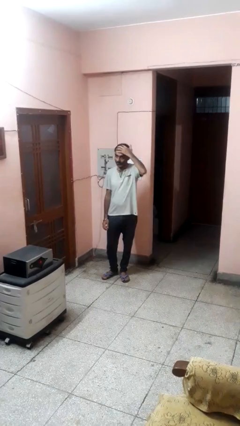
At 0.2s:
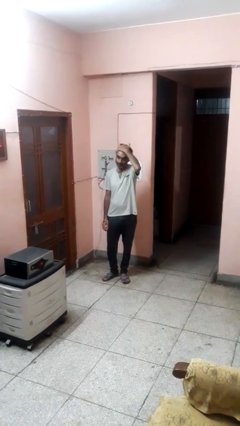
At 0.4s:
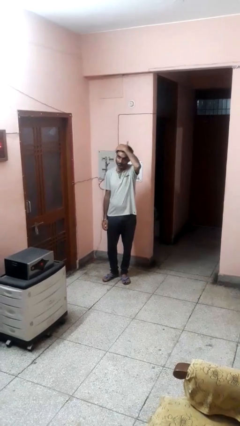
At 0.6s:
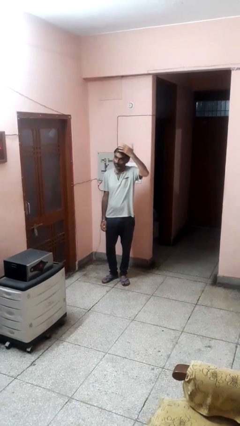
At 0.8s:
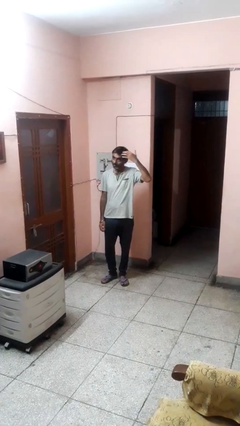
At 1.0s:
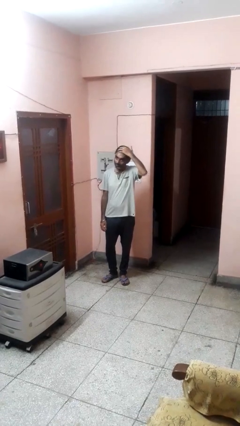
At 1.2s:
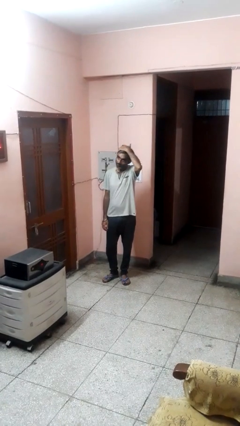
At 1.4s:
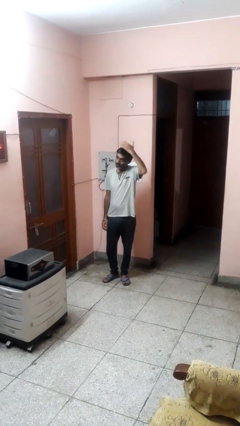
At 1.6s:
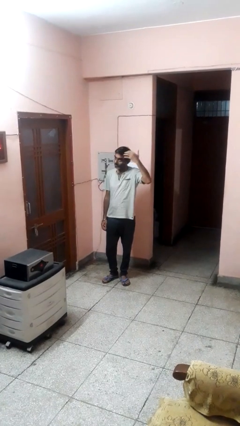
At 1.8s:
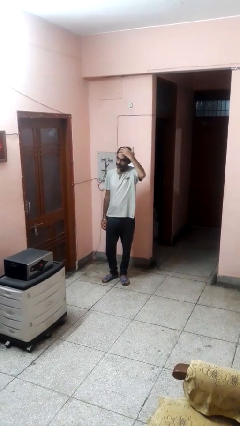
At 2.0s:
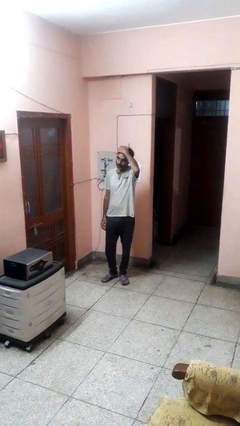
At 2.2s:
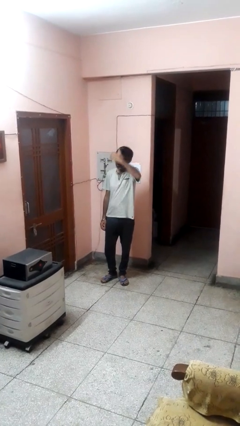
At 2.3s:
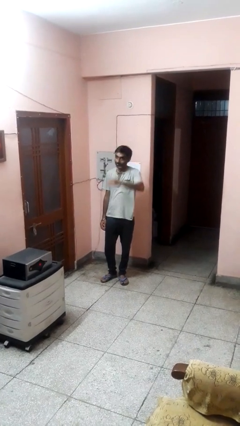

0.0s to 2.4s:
person strokes hair

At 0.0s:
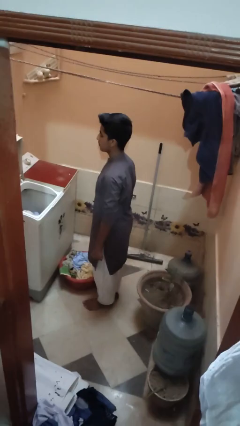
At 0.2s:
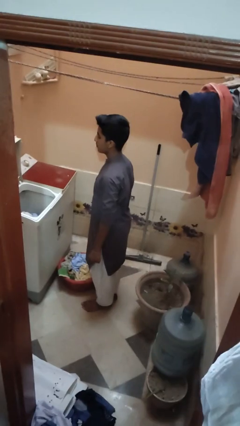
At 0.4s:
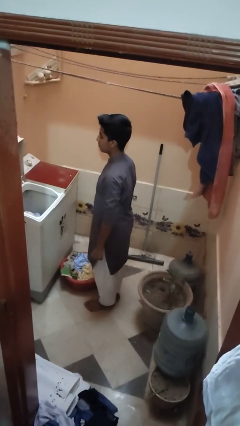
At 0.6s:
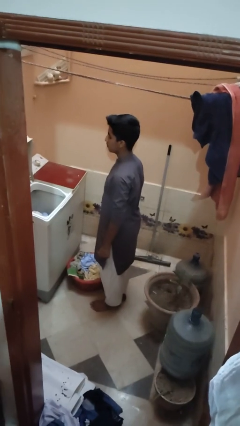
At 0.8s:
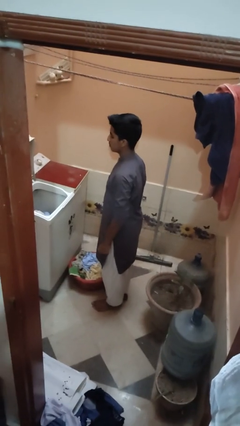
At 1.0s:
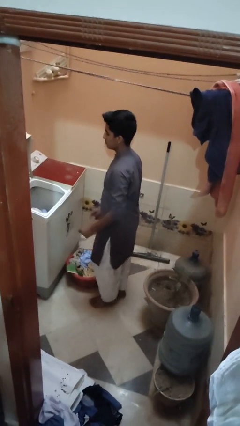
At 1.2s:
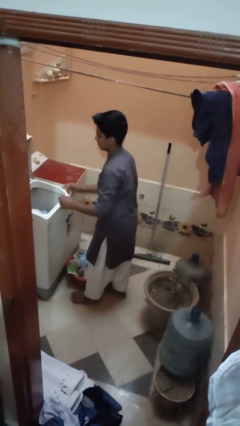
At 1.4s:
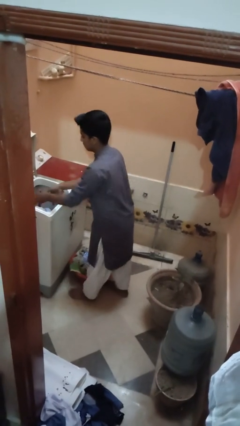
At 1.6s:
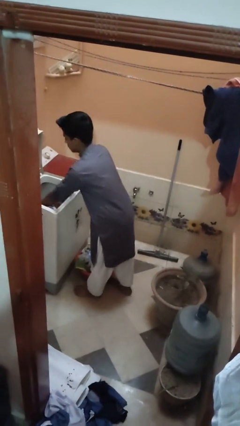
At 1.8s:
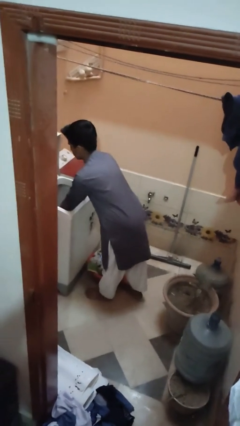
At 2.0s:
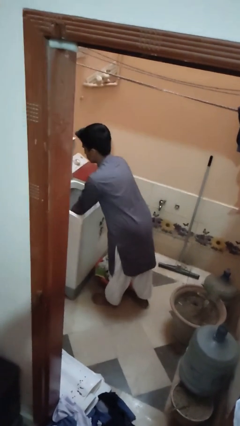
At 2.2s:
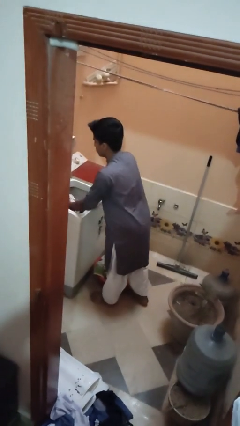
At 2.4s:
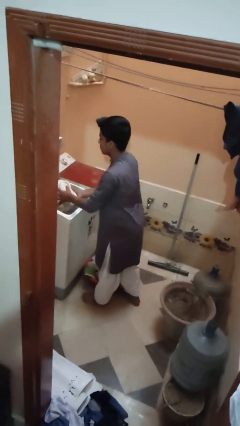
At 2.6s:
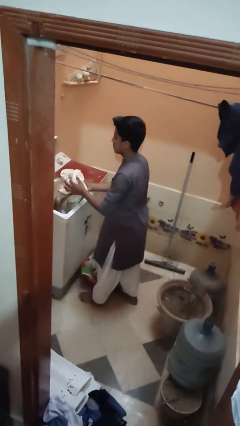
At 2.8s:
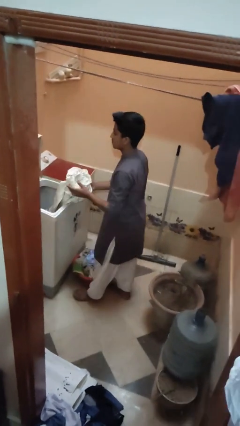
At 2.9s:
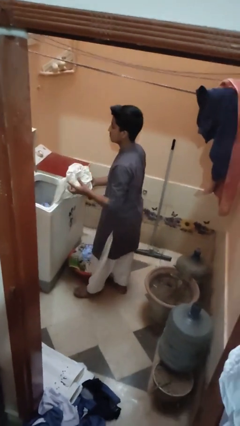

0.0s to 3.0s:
person unloads clotheswasher

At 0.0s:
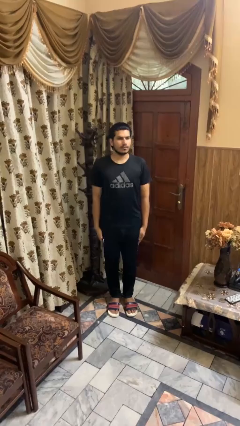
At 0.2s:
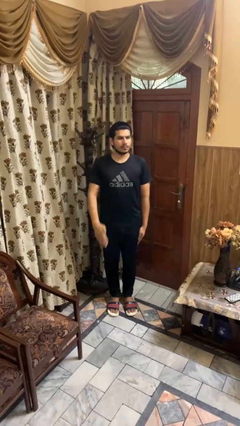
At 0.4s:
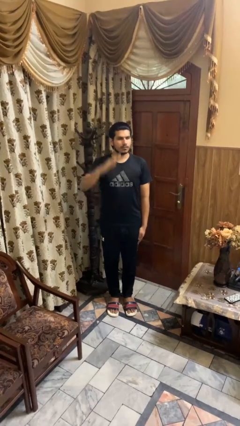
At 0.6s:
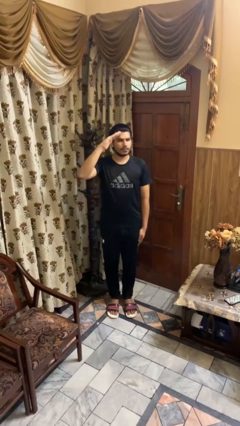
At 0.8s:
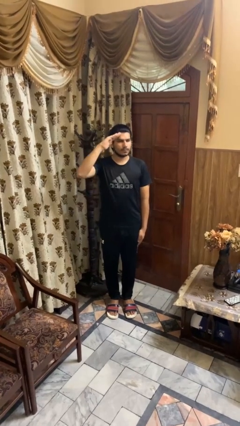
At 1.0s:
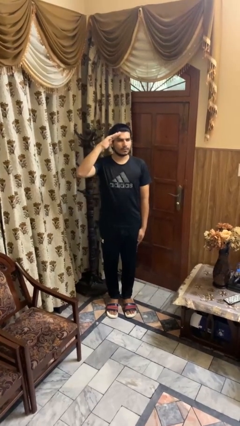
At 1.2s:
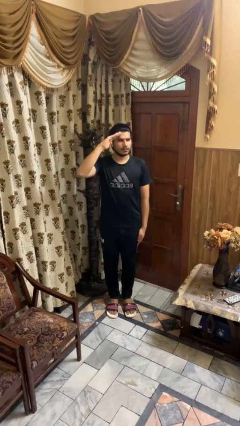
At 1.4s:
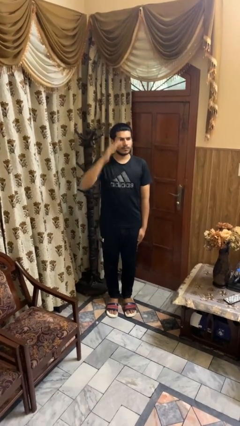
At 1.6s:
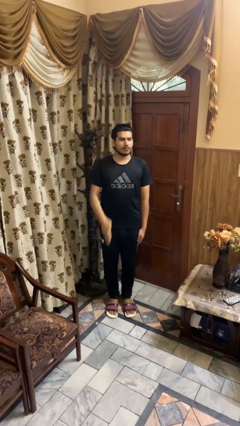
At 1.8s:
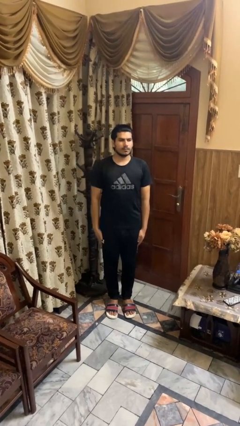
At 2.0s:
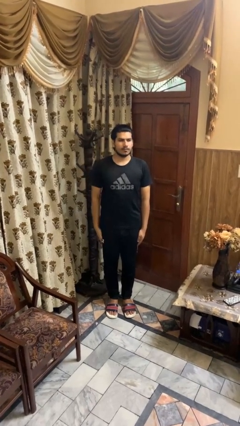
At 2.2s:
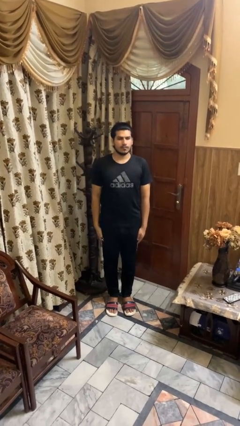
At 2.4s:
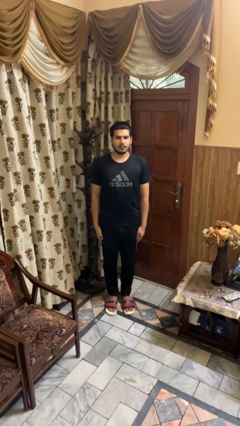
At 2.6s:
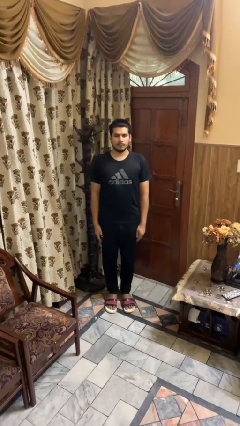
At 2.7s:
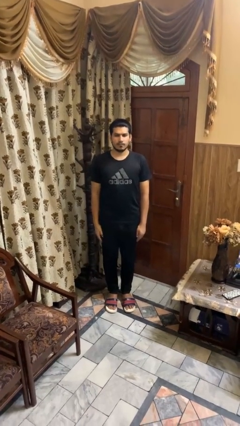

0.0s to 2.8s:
person salutes

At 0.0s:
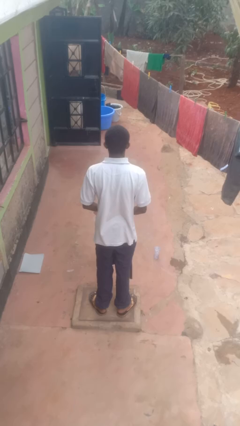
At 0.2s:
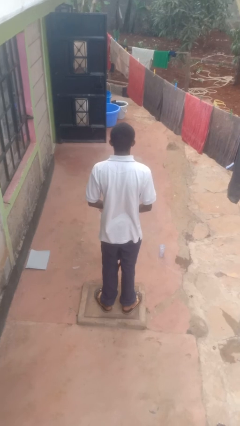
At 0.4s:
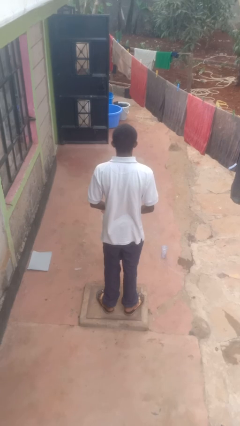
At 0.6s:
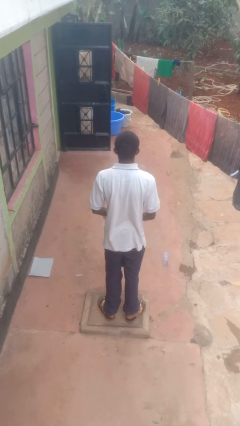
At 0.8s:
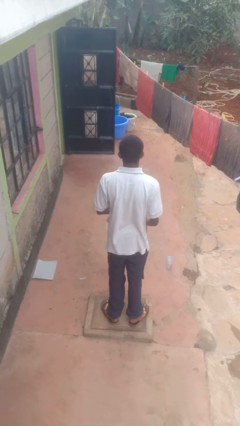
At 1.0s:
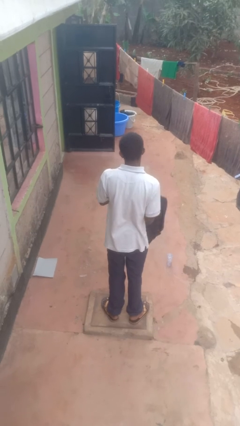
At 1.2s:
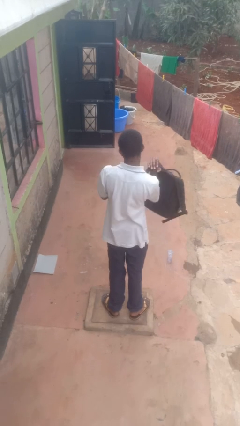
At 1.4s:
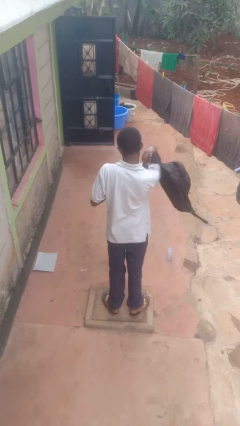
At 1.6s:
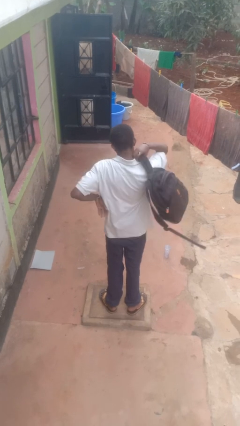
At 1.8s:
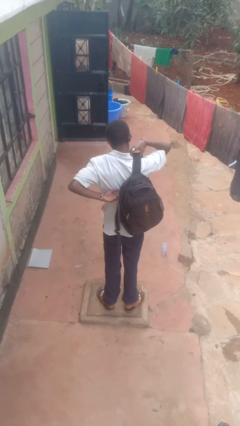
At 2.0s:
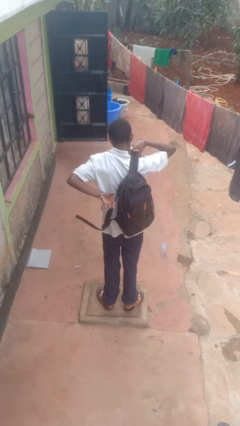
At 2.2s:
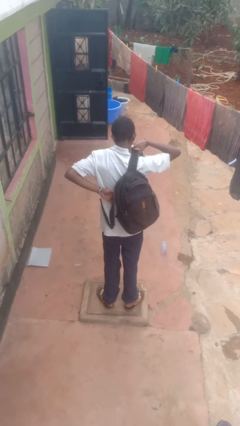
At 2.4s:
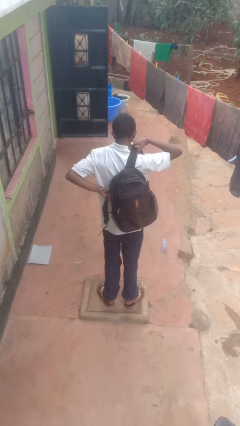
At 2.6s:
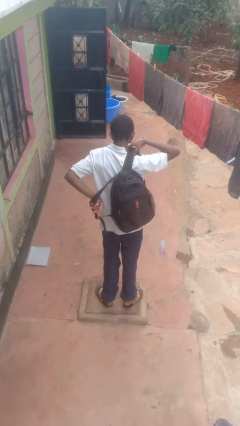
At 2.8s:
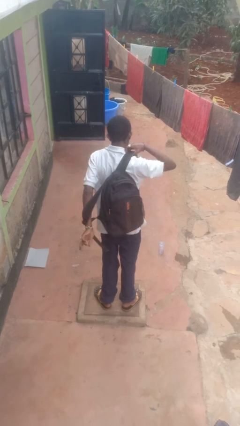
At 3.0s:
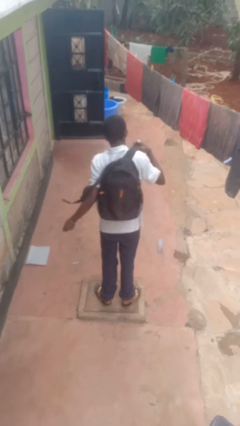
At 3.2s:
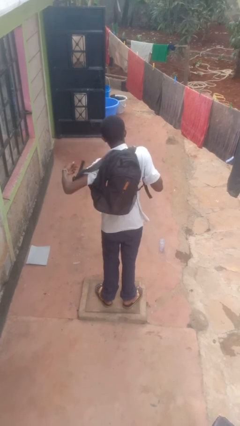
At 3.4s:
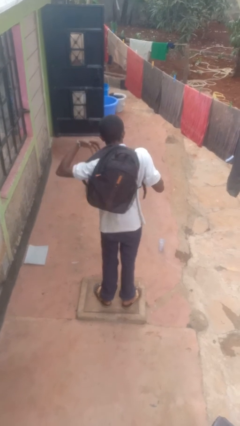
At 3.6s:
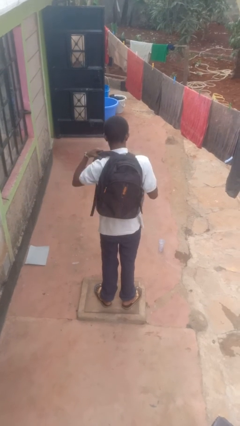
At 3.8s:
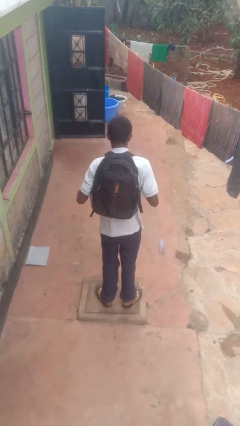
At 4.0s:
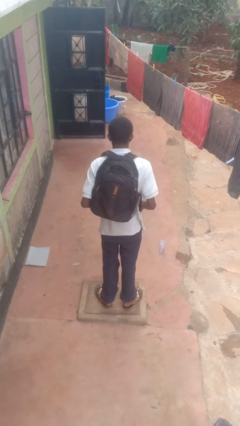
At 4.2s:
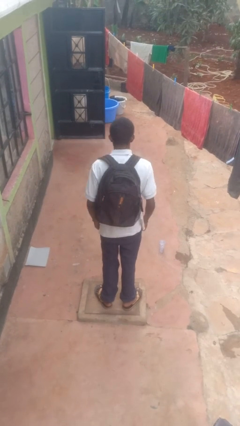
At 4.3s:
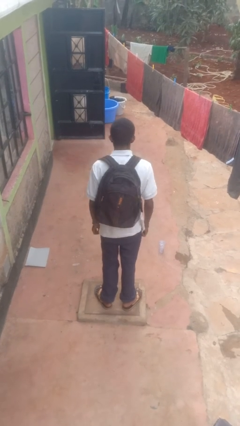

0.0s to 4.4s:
person puts on backpack

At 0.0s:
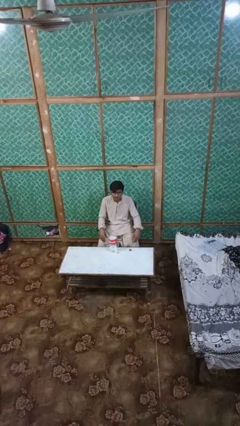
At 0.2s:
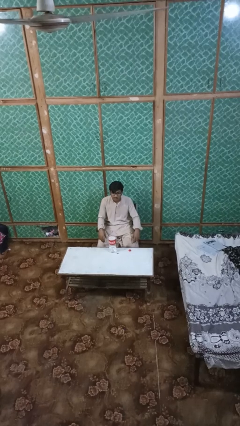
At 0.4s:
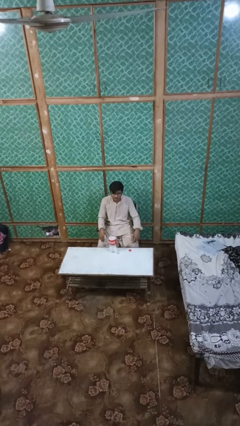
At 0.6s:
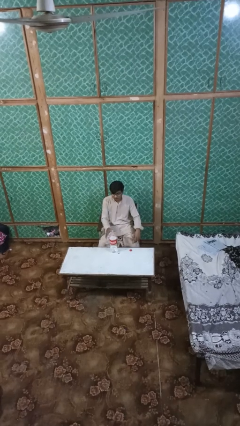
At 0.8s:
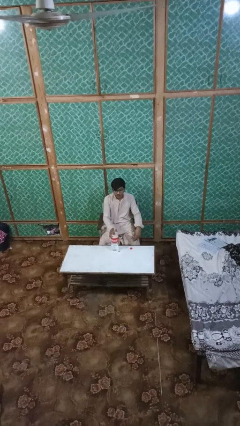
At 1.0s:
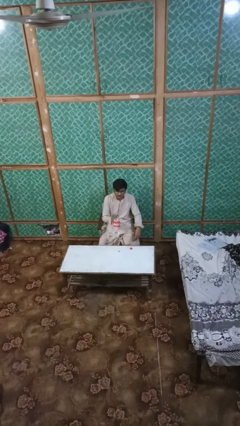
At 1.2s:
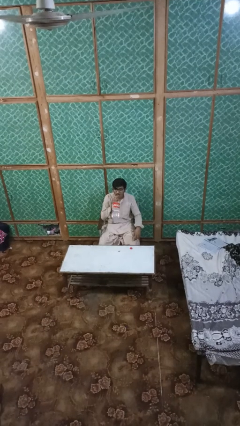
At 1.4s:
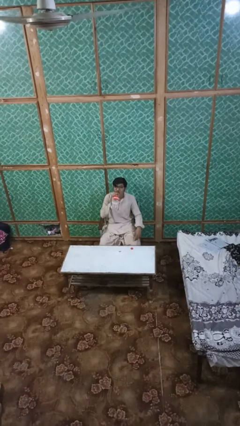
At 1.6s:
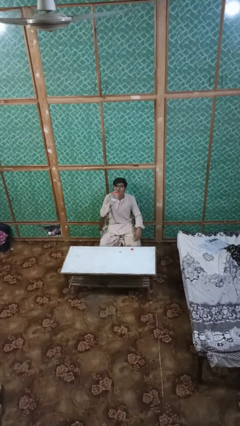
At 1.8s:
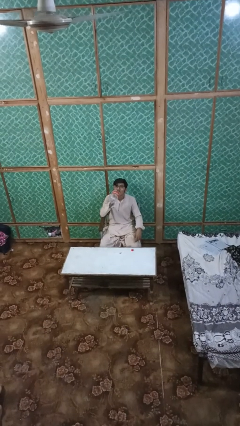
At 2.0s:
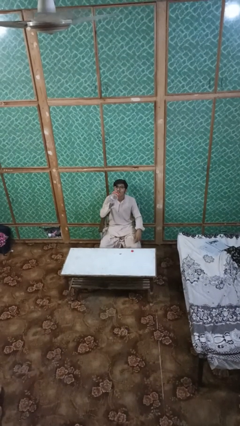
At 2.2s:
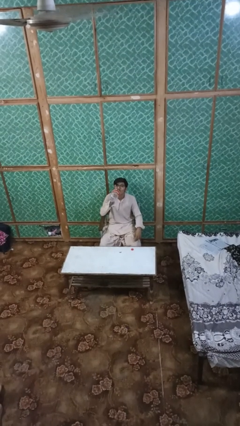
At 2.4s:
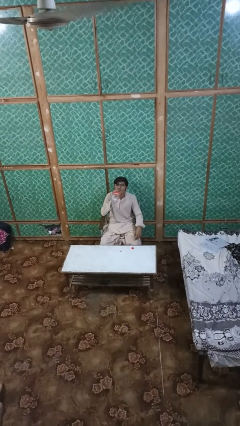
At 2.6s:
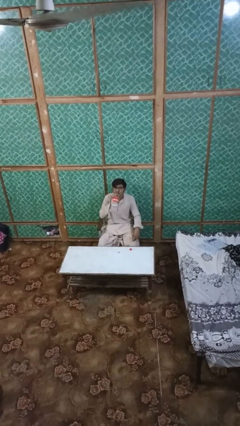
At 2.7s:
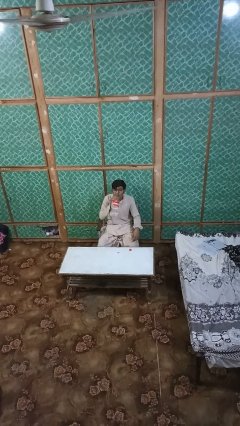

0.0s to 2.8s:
person drinks from bottle

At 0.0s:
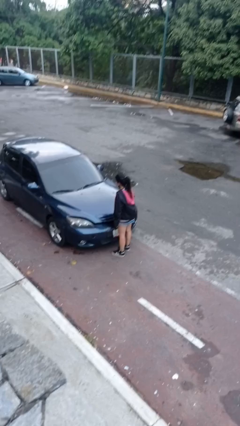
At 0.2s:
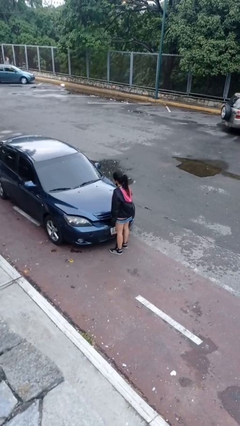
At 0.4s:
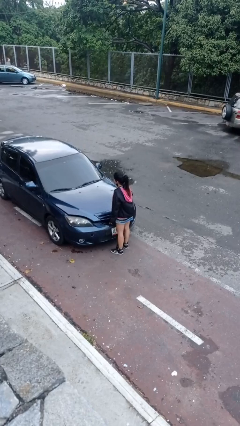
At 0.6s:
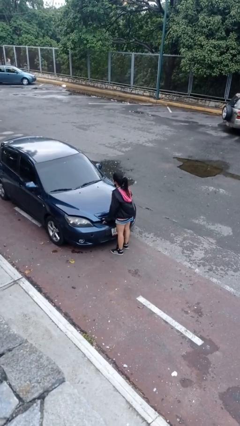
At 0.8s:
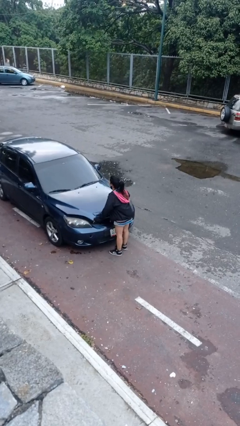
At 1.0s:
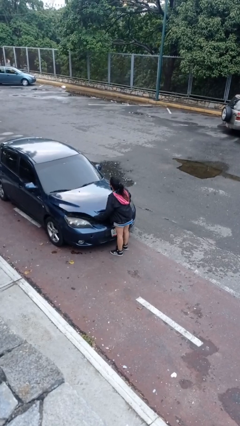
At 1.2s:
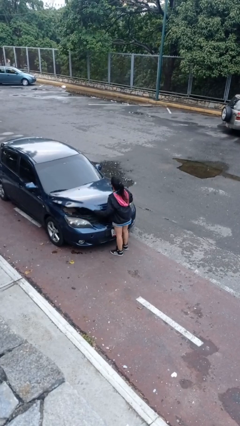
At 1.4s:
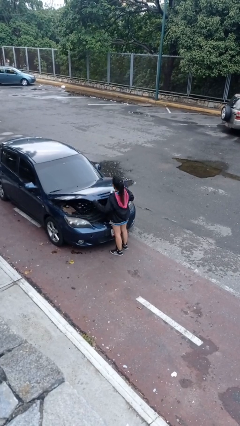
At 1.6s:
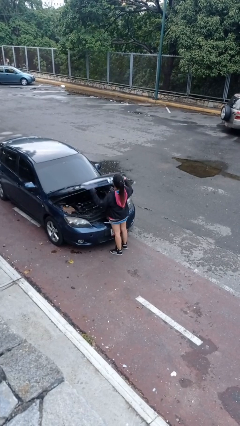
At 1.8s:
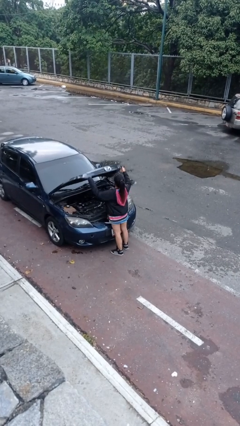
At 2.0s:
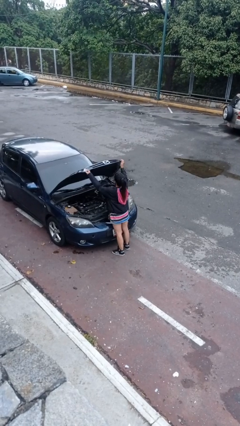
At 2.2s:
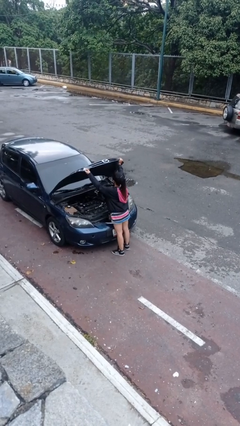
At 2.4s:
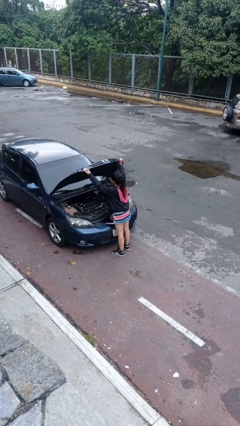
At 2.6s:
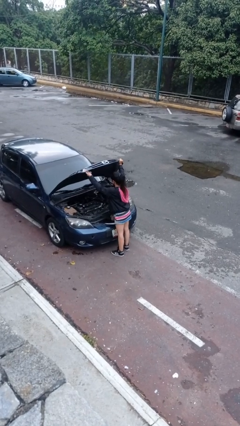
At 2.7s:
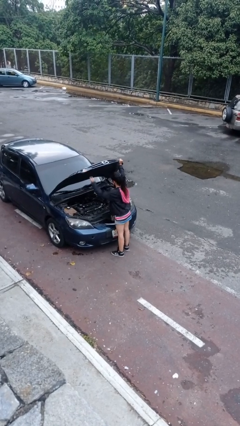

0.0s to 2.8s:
person opens car hood
